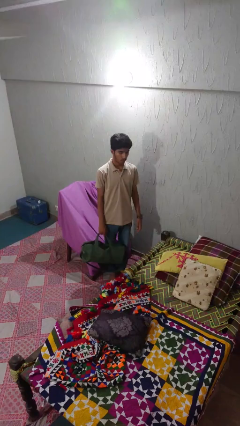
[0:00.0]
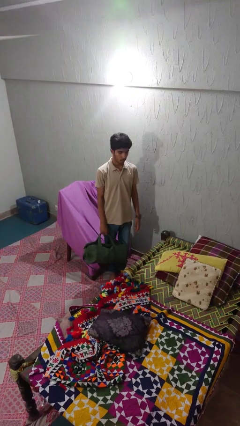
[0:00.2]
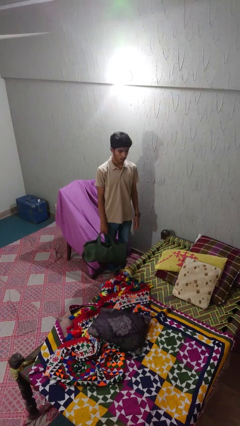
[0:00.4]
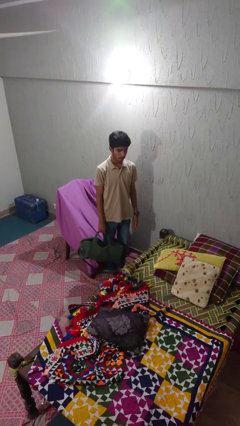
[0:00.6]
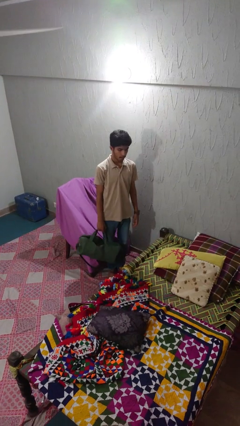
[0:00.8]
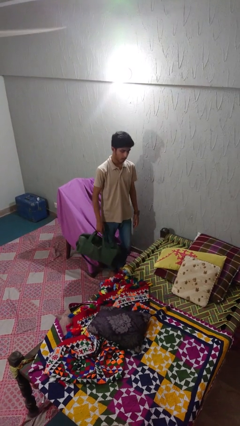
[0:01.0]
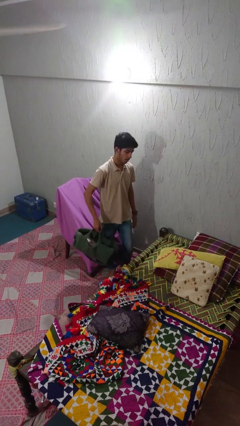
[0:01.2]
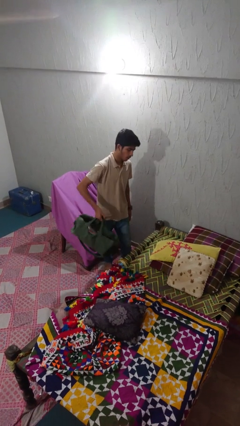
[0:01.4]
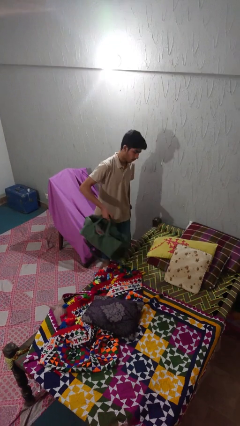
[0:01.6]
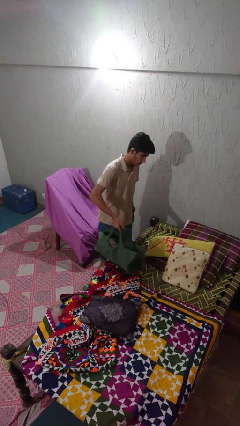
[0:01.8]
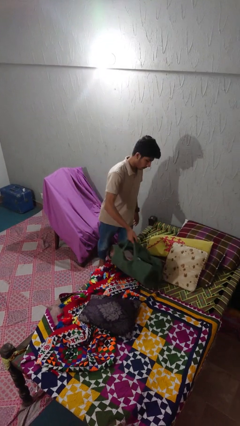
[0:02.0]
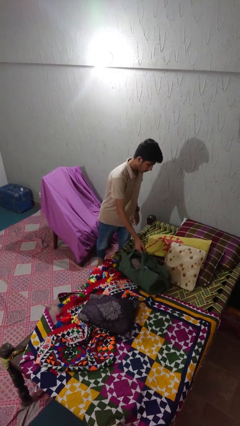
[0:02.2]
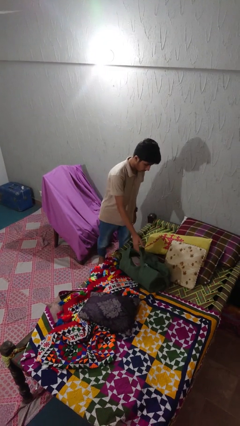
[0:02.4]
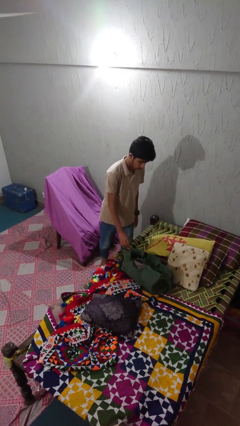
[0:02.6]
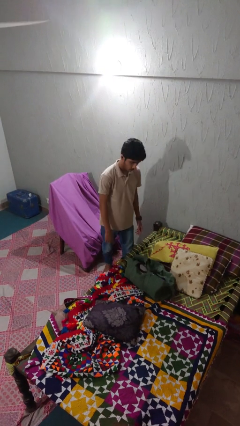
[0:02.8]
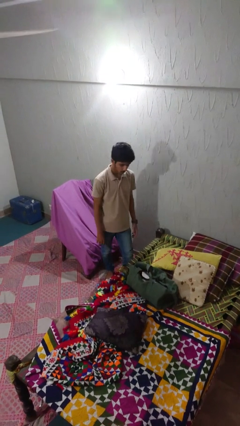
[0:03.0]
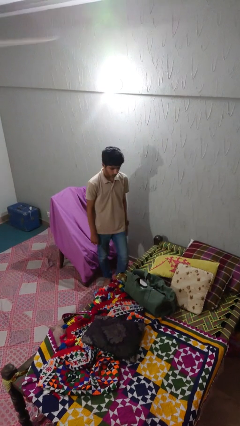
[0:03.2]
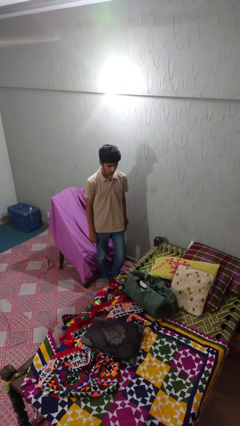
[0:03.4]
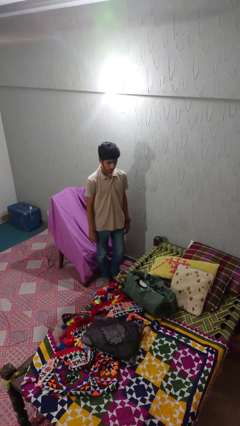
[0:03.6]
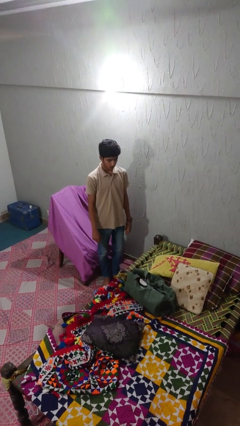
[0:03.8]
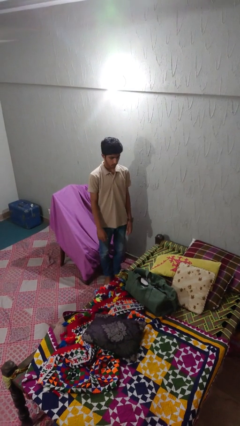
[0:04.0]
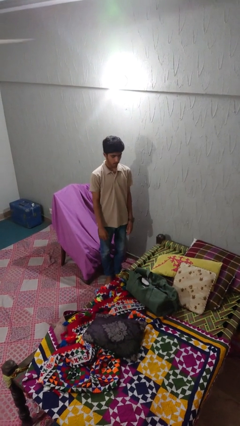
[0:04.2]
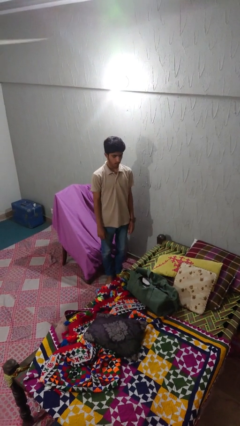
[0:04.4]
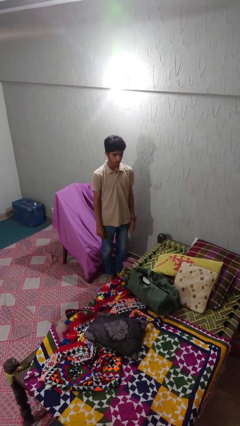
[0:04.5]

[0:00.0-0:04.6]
person puts down object on bed

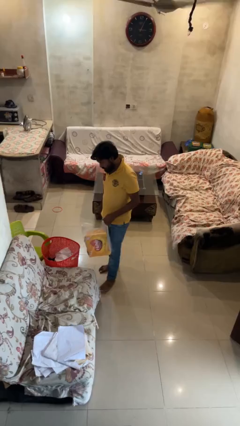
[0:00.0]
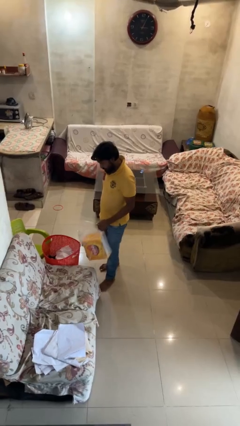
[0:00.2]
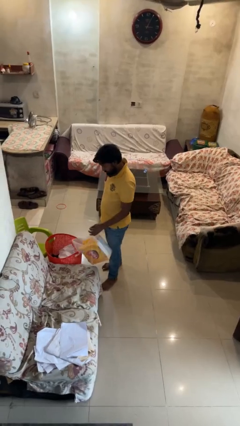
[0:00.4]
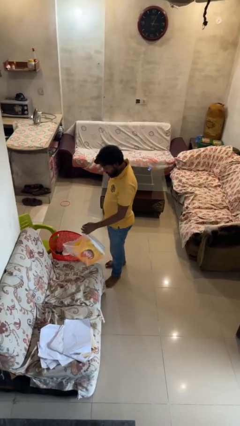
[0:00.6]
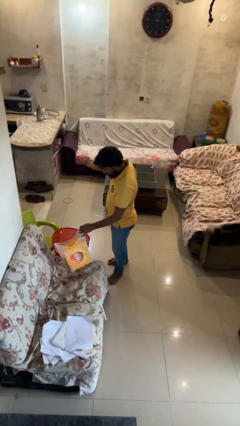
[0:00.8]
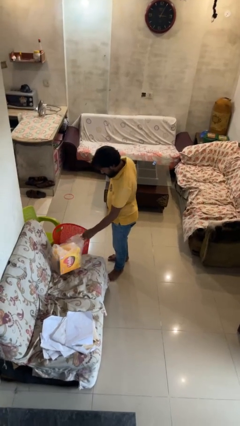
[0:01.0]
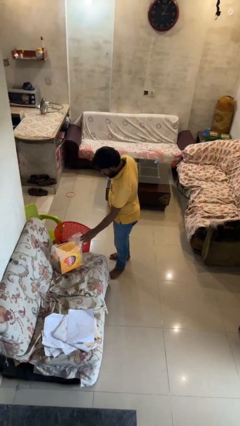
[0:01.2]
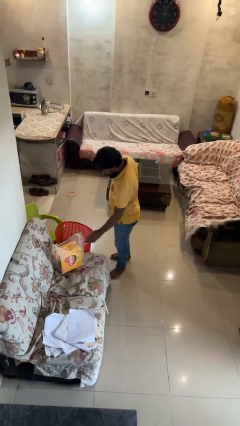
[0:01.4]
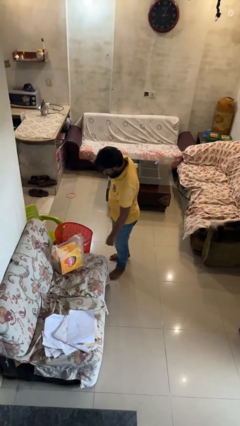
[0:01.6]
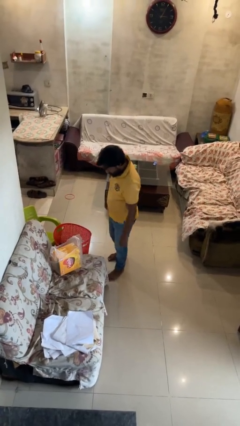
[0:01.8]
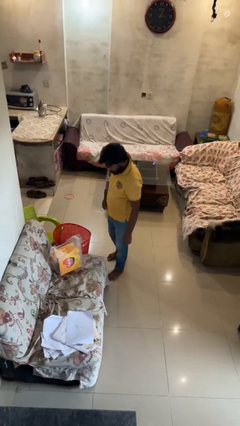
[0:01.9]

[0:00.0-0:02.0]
person puts down object on couch

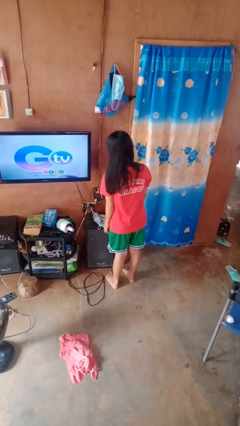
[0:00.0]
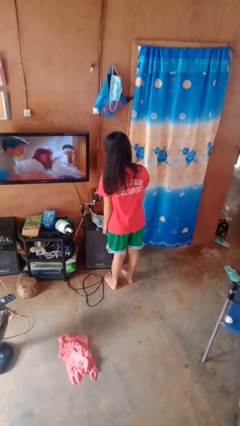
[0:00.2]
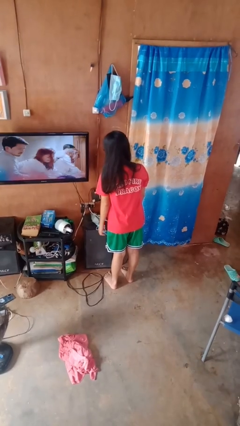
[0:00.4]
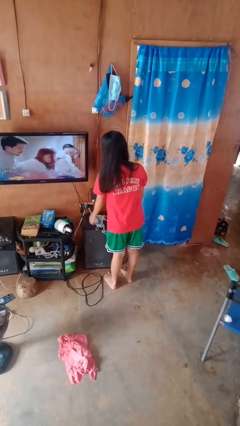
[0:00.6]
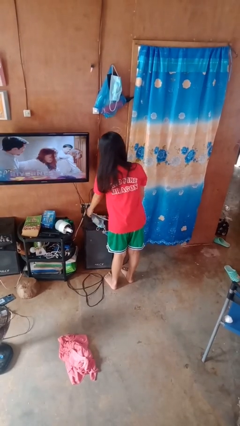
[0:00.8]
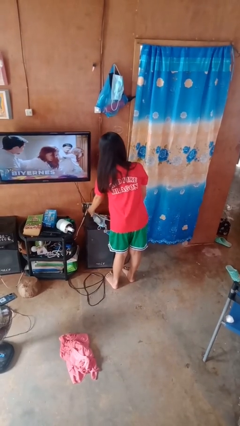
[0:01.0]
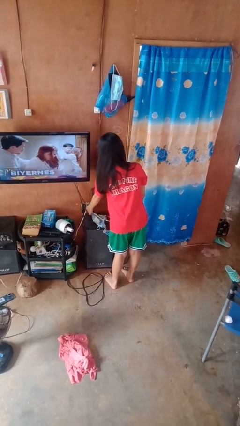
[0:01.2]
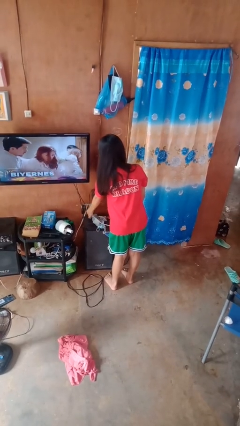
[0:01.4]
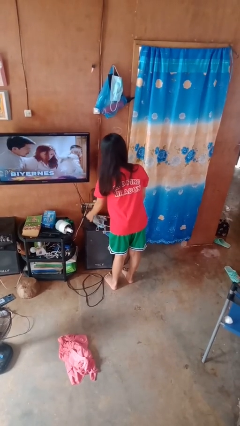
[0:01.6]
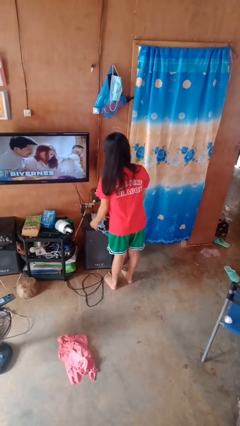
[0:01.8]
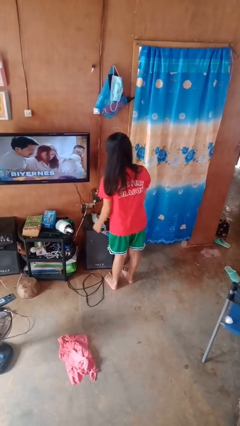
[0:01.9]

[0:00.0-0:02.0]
person unplugs from electrical socket

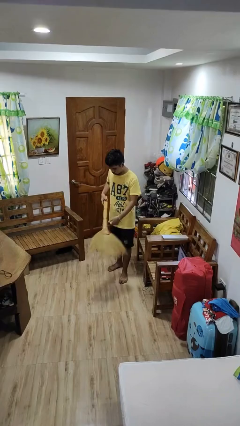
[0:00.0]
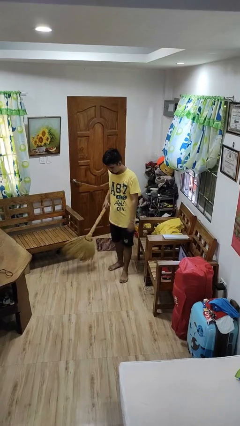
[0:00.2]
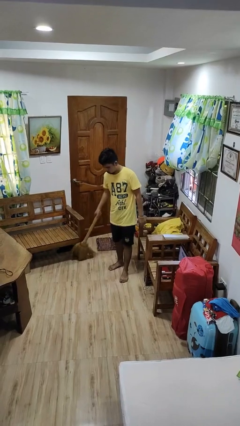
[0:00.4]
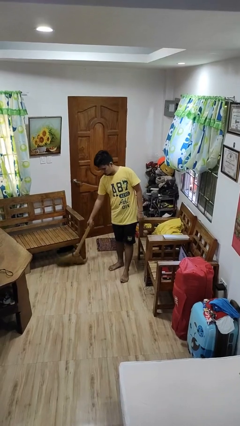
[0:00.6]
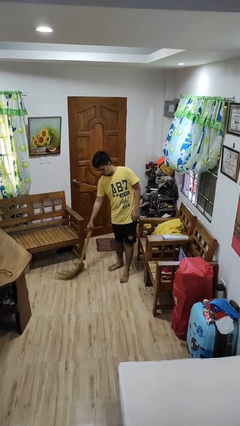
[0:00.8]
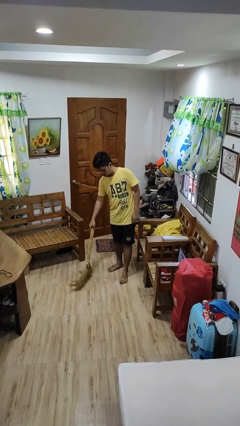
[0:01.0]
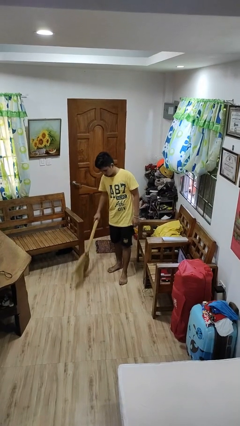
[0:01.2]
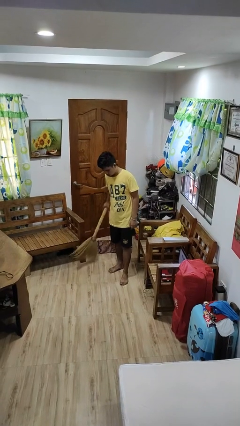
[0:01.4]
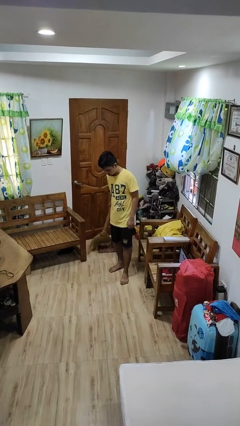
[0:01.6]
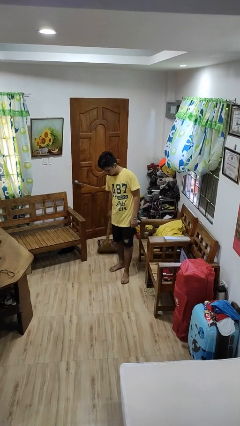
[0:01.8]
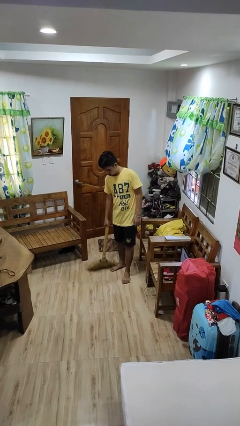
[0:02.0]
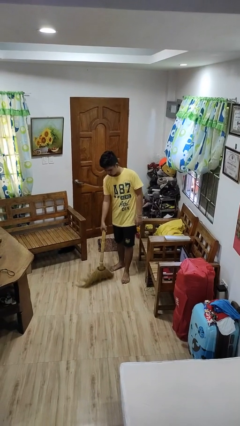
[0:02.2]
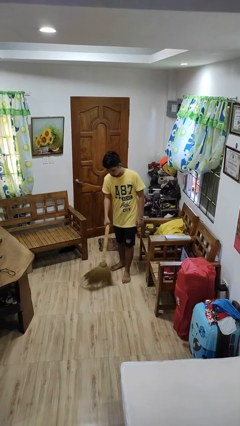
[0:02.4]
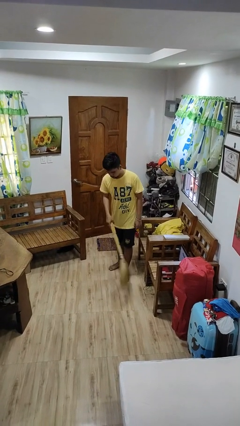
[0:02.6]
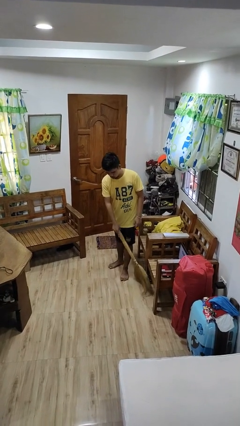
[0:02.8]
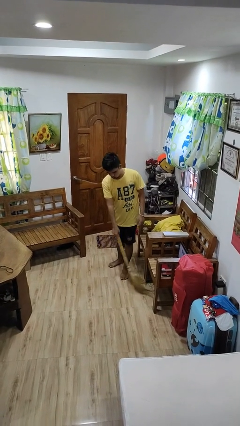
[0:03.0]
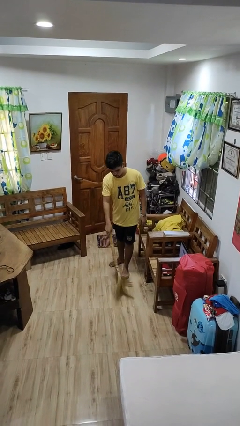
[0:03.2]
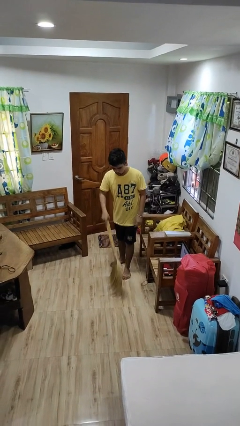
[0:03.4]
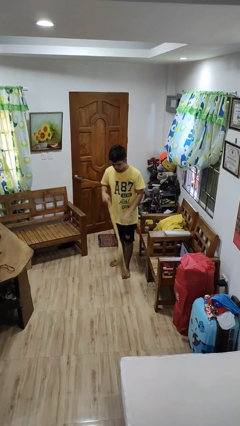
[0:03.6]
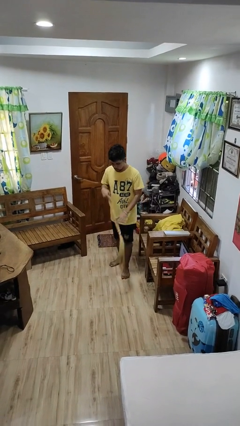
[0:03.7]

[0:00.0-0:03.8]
person sweeps floor

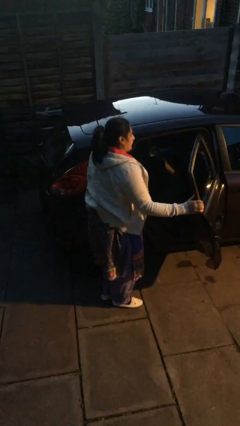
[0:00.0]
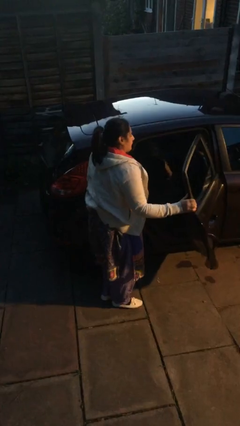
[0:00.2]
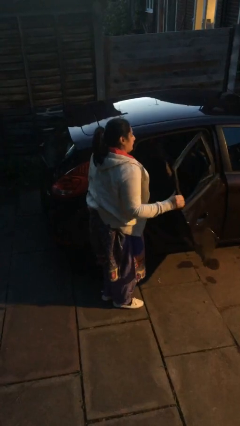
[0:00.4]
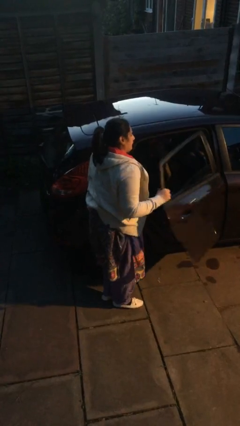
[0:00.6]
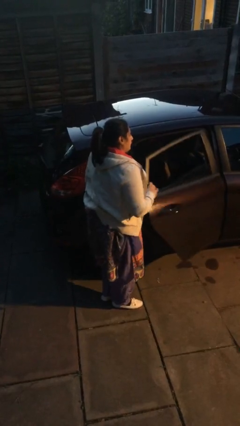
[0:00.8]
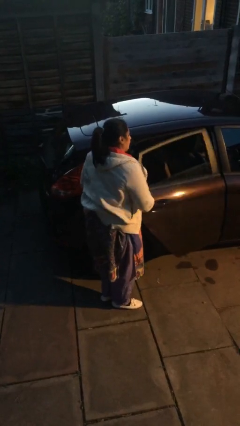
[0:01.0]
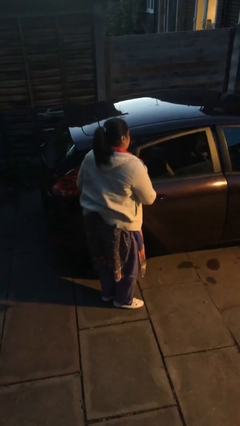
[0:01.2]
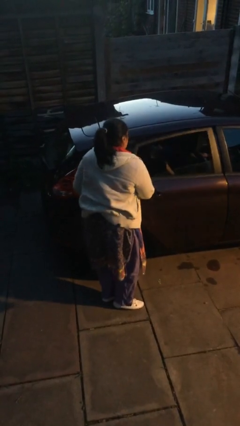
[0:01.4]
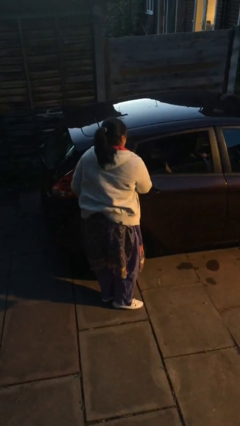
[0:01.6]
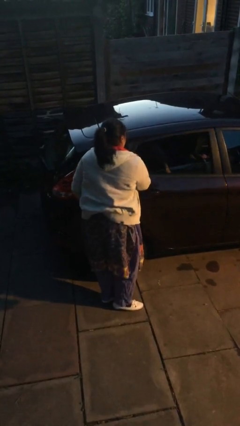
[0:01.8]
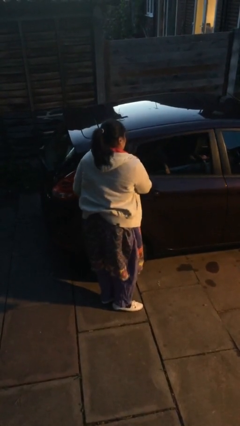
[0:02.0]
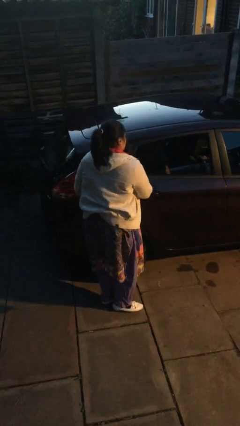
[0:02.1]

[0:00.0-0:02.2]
person closes car door

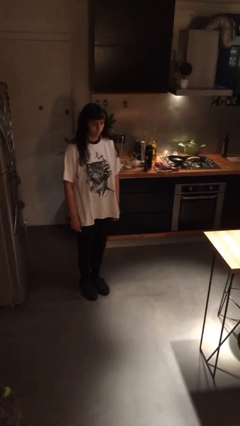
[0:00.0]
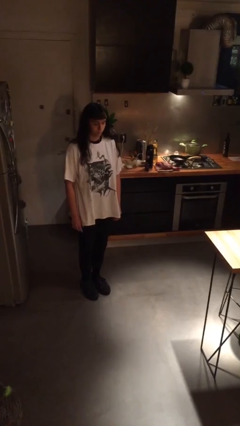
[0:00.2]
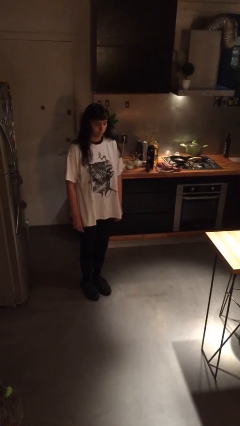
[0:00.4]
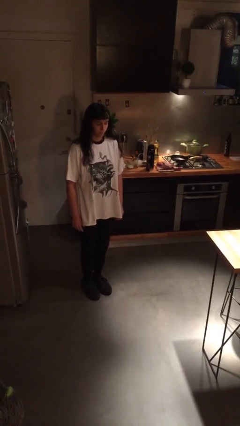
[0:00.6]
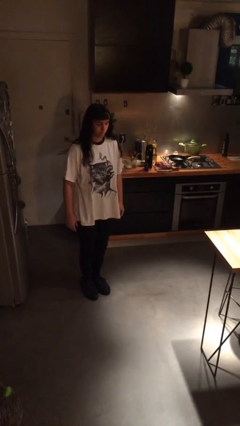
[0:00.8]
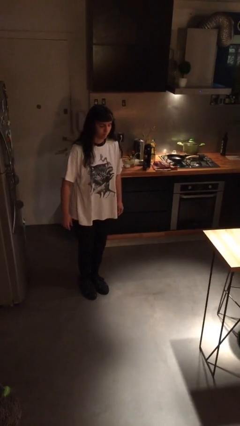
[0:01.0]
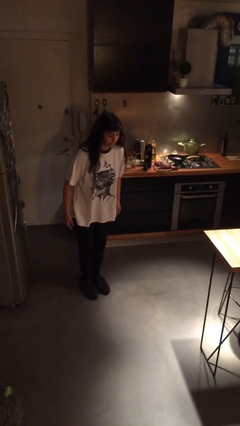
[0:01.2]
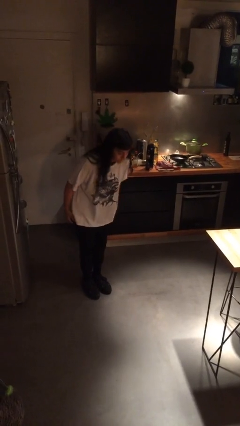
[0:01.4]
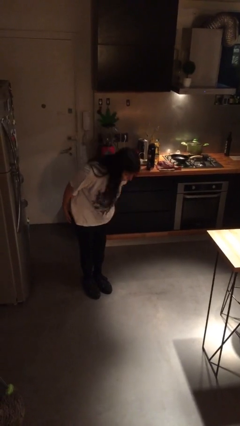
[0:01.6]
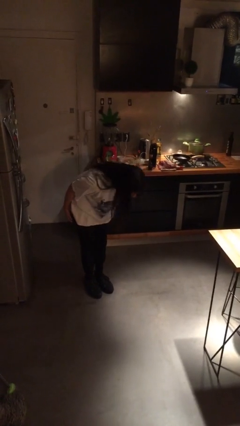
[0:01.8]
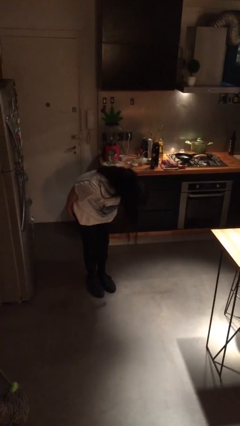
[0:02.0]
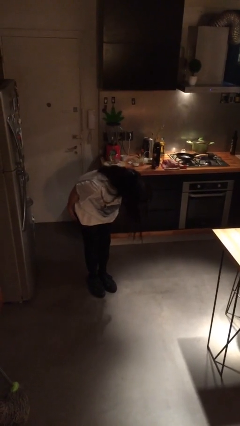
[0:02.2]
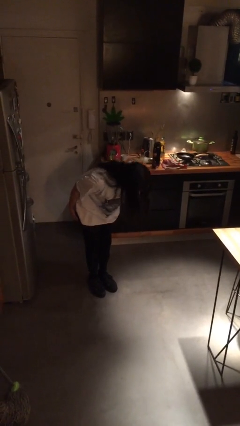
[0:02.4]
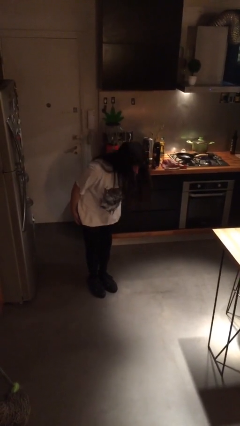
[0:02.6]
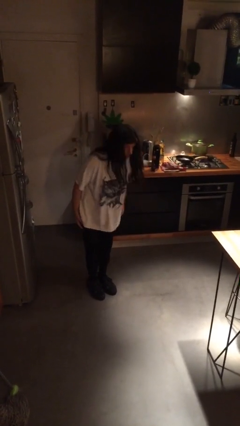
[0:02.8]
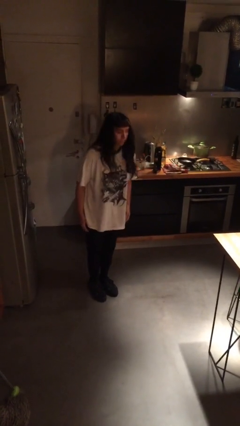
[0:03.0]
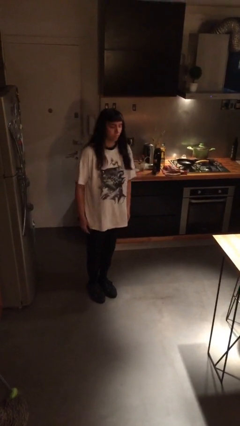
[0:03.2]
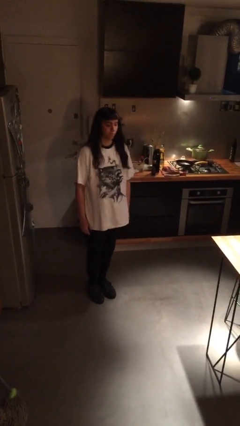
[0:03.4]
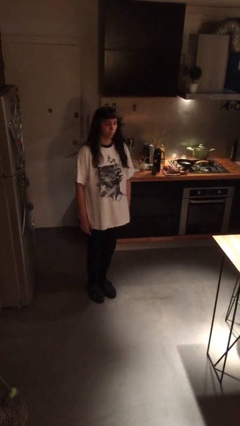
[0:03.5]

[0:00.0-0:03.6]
person bows
